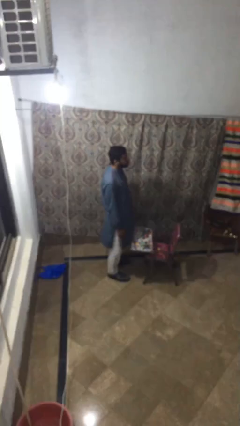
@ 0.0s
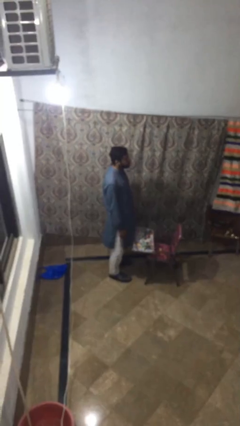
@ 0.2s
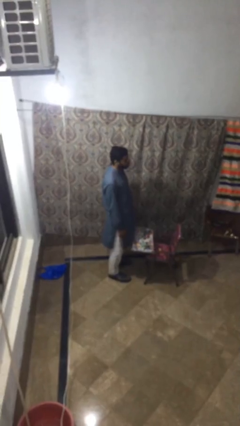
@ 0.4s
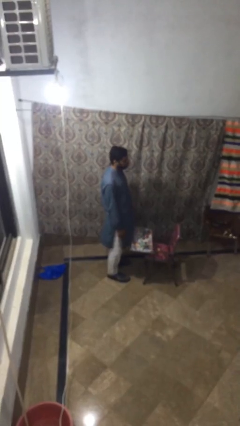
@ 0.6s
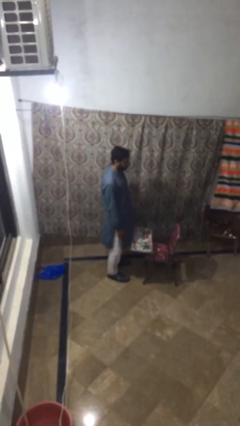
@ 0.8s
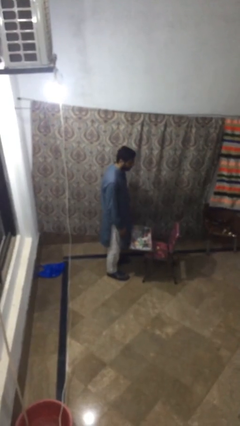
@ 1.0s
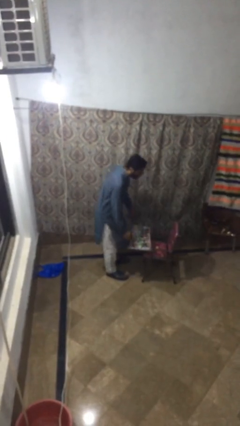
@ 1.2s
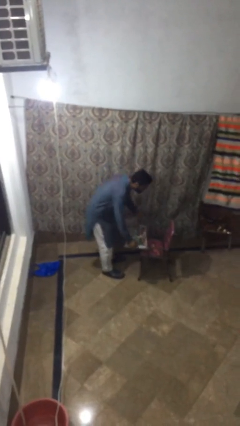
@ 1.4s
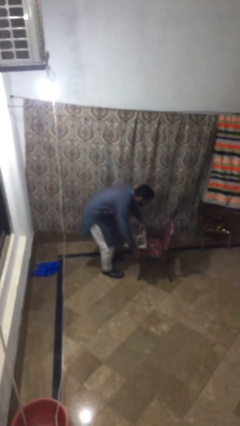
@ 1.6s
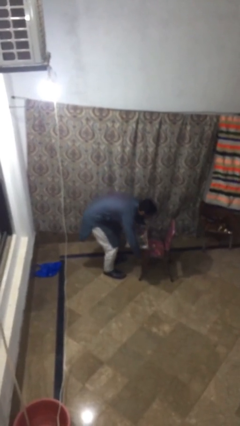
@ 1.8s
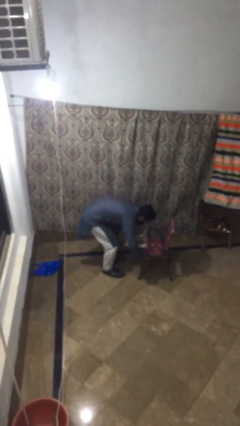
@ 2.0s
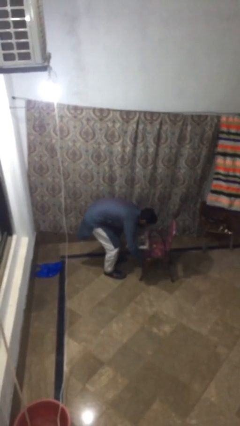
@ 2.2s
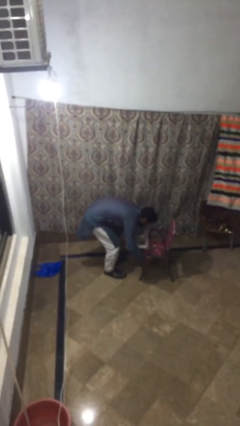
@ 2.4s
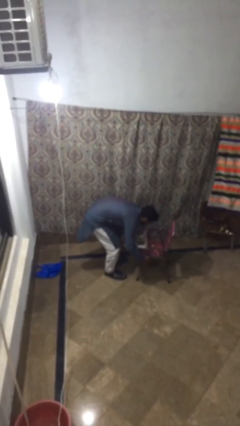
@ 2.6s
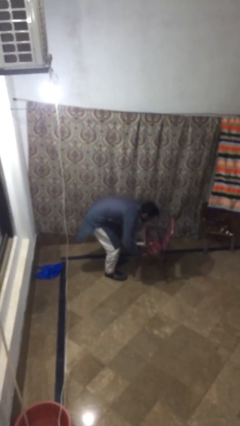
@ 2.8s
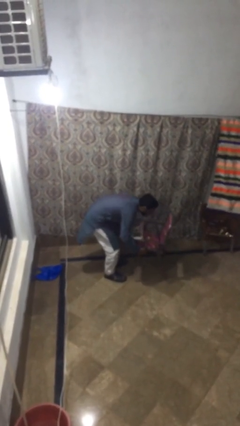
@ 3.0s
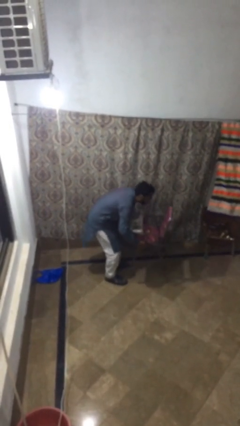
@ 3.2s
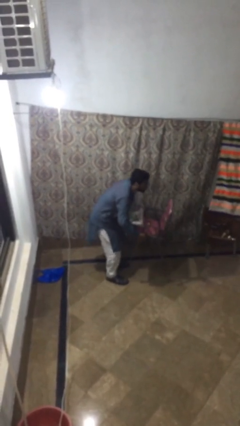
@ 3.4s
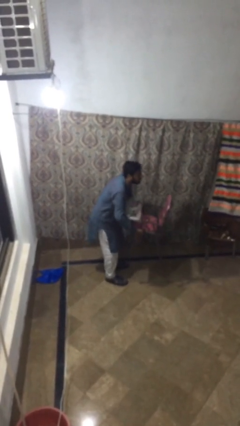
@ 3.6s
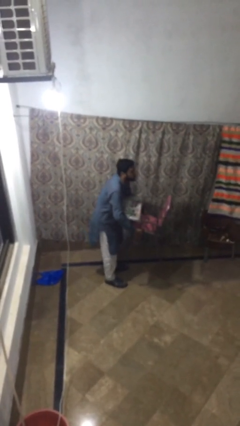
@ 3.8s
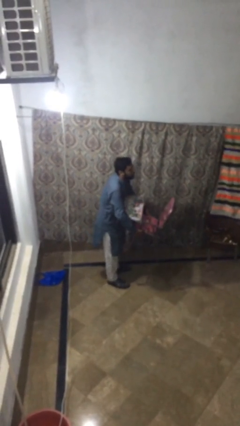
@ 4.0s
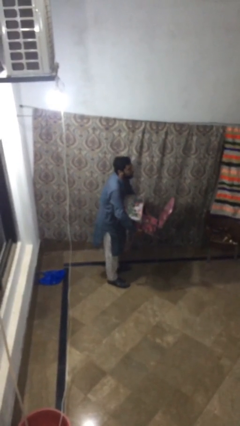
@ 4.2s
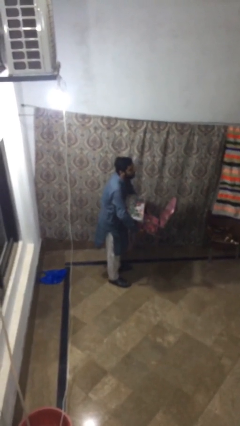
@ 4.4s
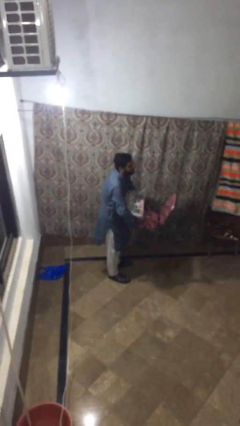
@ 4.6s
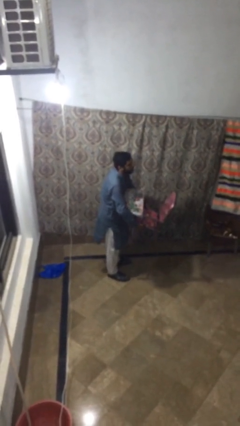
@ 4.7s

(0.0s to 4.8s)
person picks up object from floor

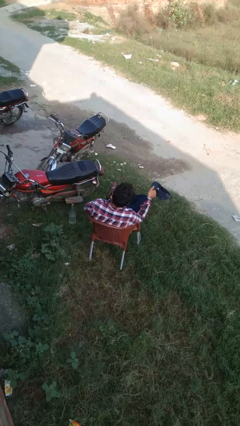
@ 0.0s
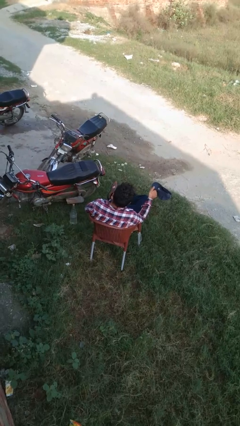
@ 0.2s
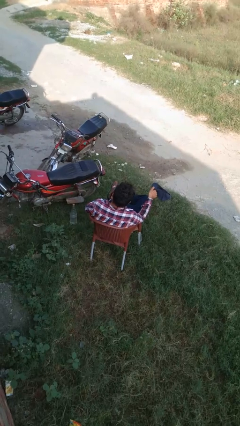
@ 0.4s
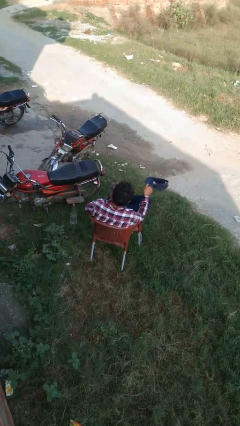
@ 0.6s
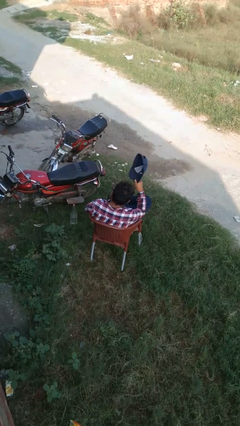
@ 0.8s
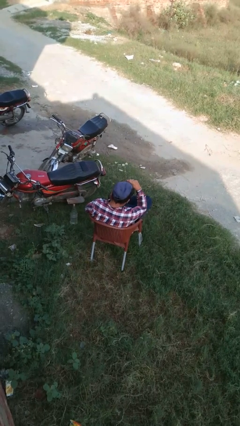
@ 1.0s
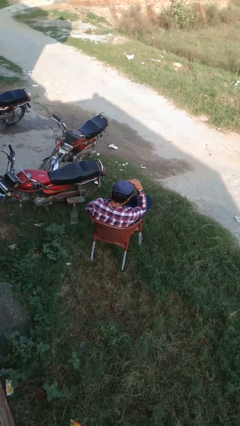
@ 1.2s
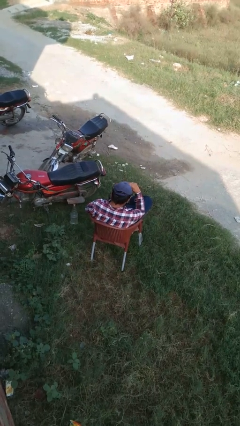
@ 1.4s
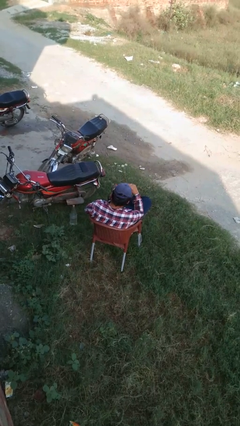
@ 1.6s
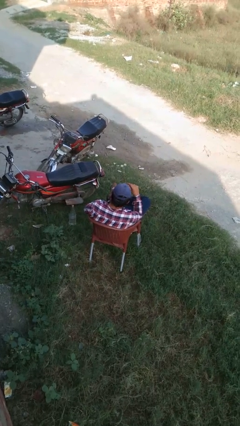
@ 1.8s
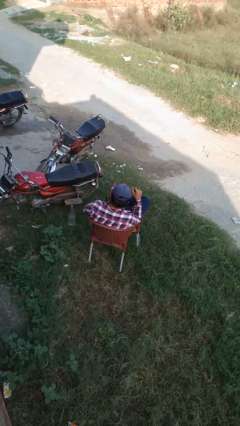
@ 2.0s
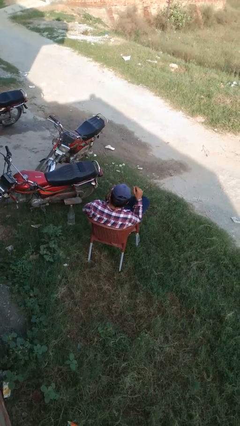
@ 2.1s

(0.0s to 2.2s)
person puts on hat

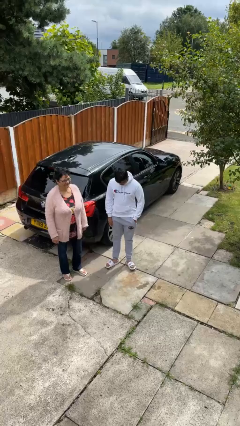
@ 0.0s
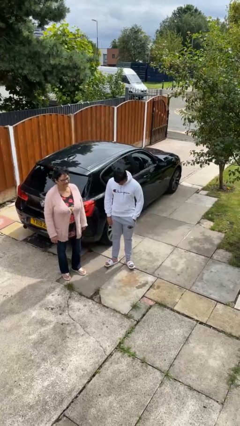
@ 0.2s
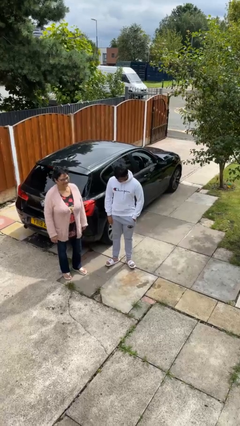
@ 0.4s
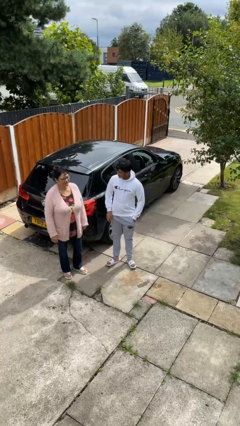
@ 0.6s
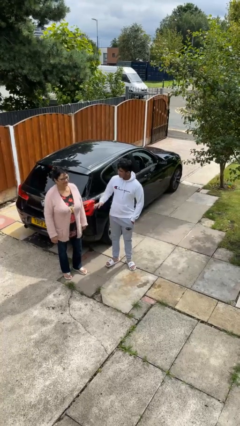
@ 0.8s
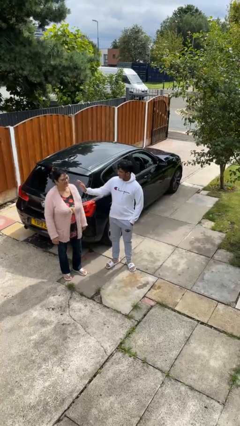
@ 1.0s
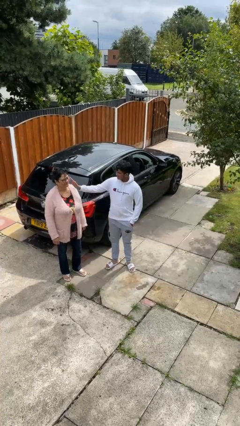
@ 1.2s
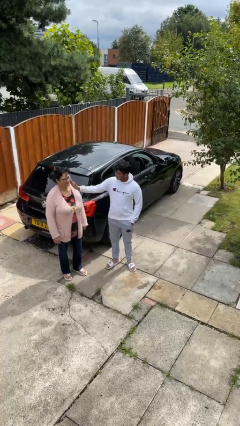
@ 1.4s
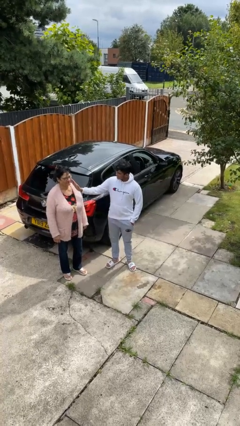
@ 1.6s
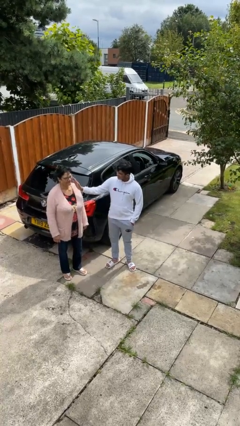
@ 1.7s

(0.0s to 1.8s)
person touches face of person

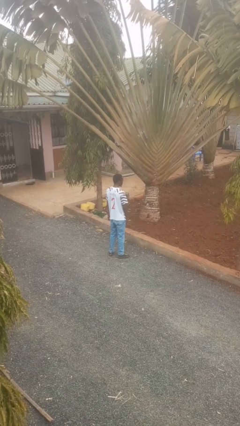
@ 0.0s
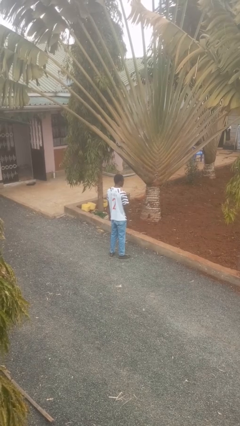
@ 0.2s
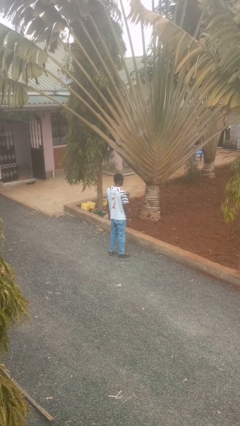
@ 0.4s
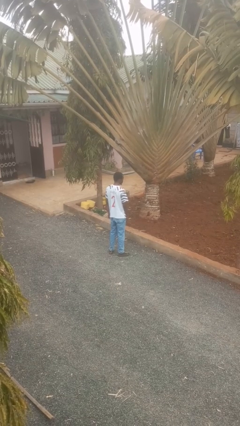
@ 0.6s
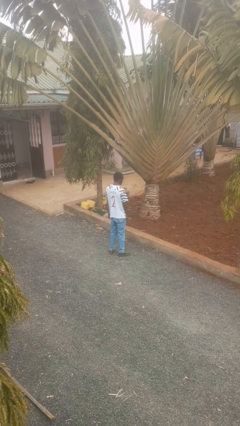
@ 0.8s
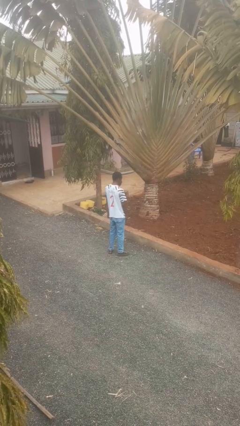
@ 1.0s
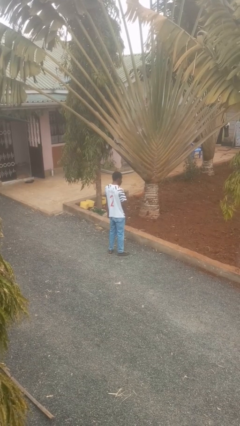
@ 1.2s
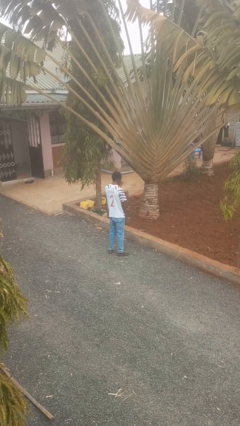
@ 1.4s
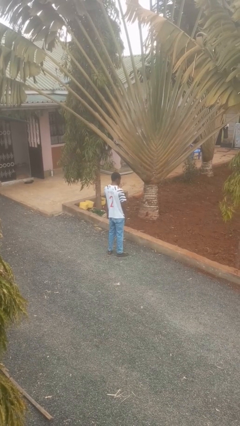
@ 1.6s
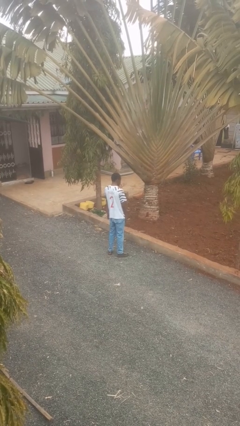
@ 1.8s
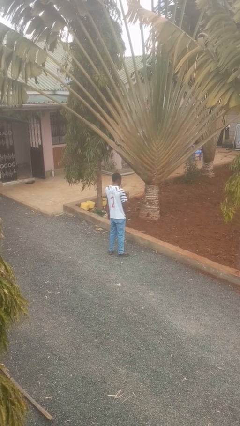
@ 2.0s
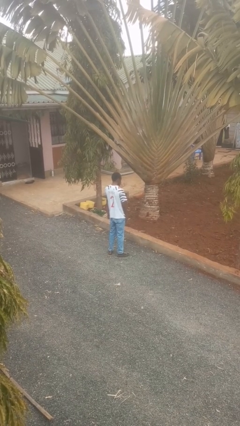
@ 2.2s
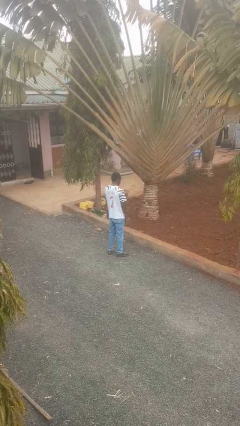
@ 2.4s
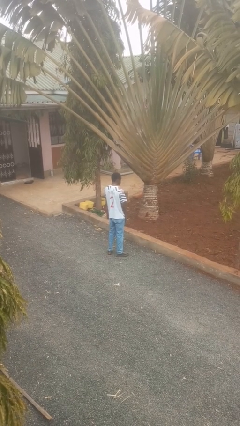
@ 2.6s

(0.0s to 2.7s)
person gestures blow kiss

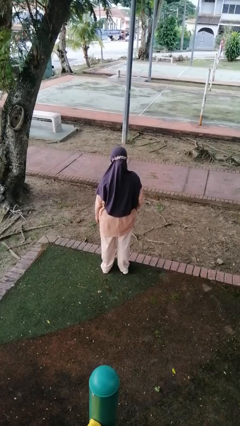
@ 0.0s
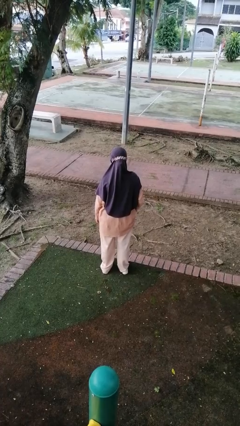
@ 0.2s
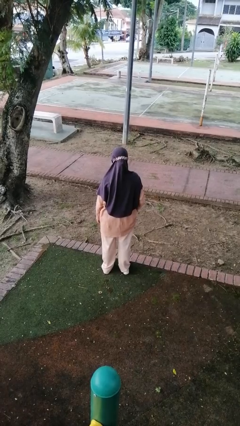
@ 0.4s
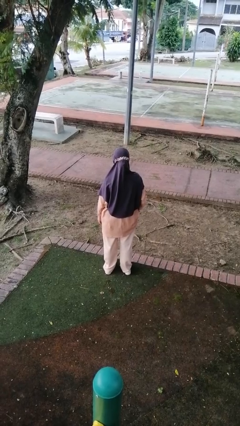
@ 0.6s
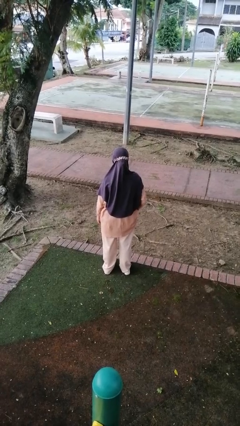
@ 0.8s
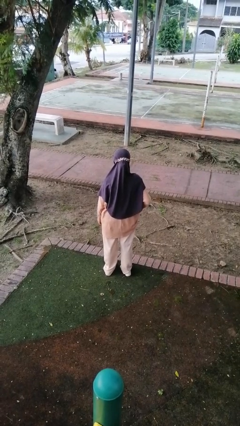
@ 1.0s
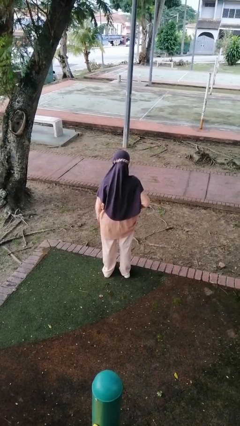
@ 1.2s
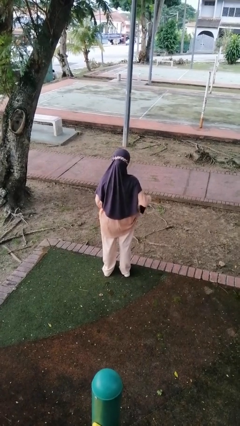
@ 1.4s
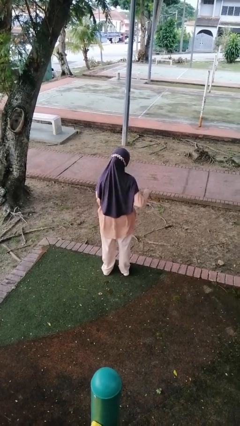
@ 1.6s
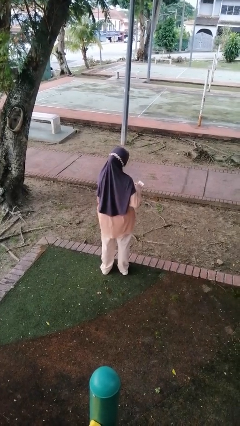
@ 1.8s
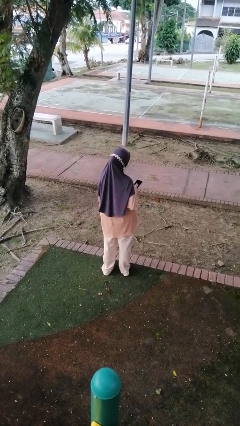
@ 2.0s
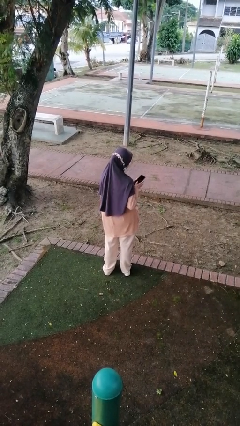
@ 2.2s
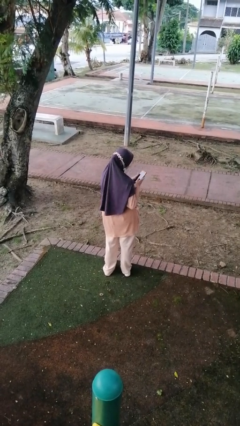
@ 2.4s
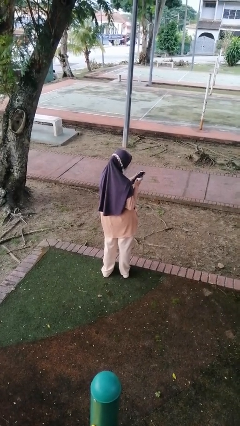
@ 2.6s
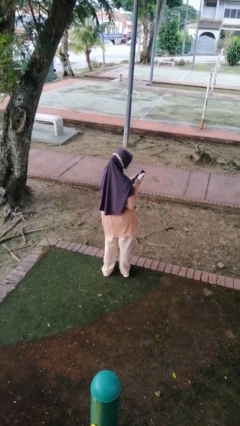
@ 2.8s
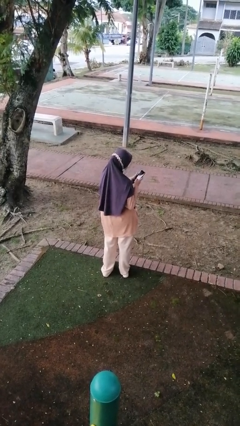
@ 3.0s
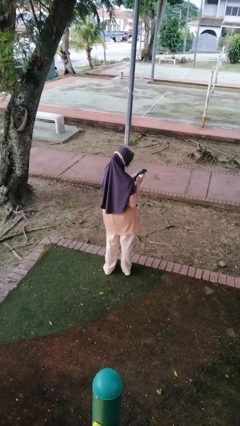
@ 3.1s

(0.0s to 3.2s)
person takes phone from pocket

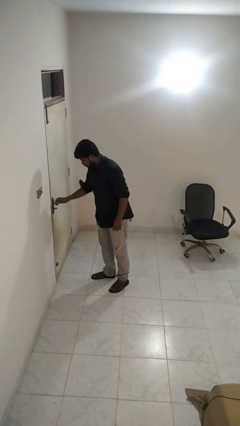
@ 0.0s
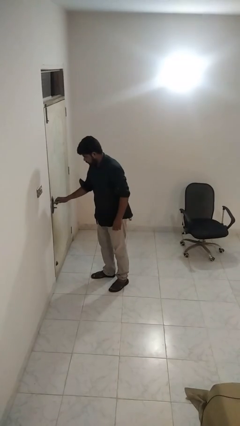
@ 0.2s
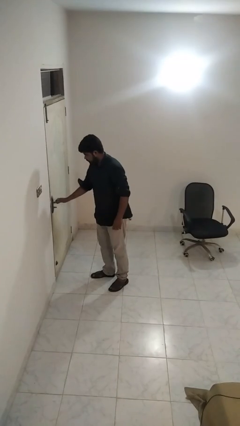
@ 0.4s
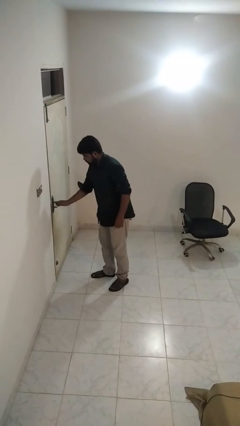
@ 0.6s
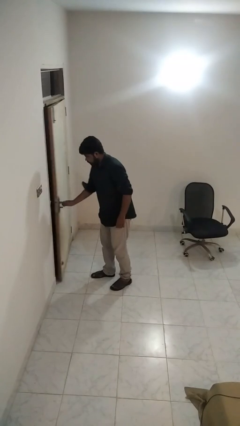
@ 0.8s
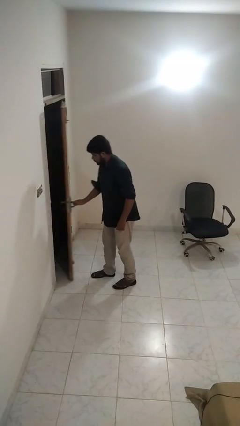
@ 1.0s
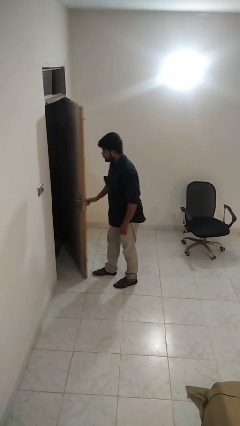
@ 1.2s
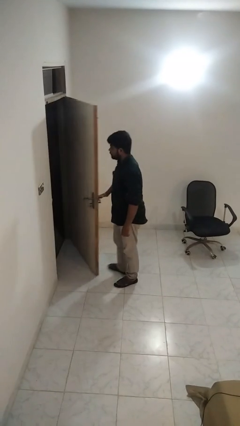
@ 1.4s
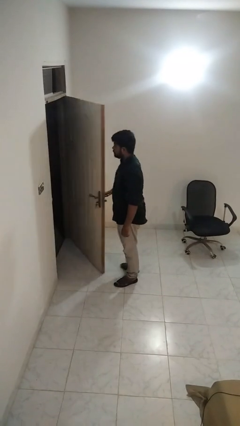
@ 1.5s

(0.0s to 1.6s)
person opens facility door

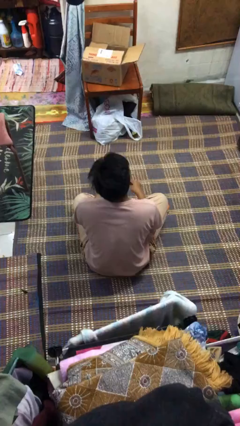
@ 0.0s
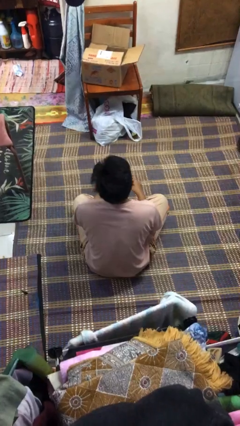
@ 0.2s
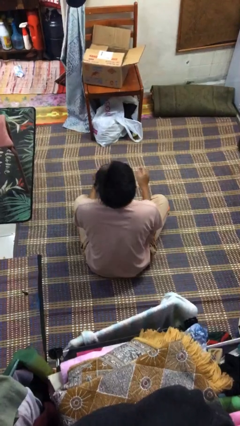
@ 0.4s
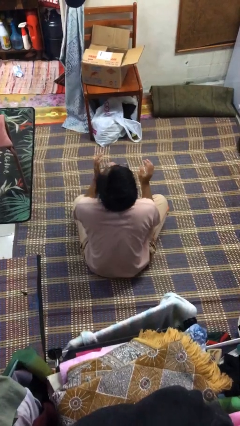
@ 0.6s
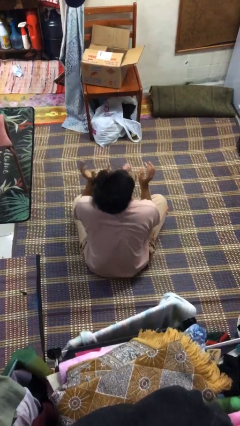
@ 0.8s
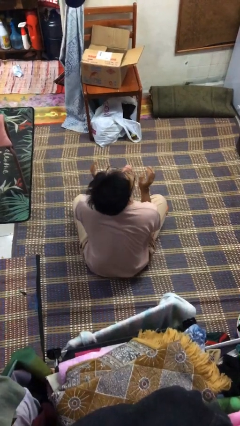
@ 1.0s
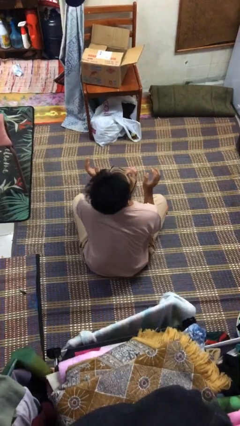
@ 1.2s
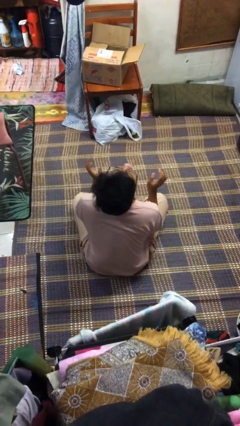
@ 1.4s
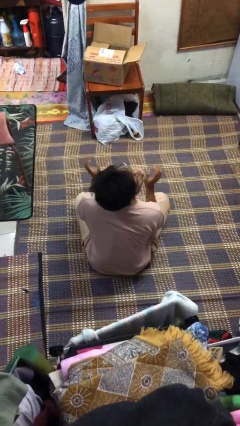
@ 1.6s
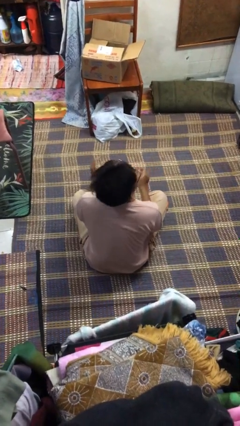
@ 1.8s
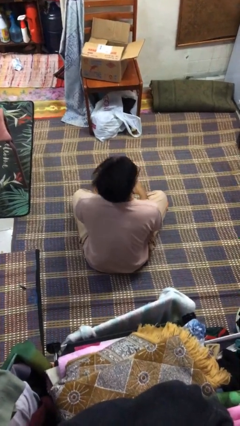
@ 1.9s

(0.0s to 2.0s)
person sticks out tongue
